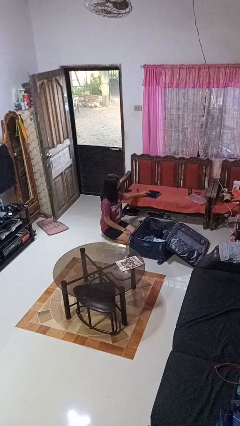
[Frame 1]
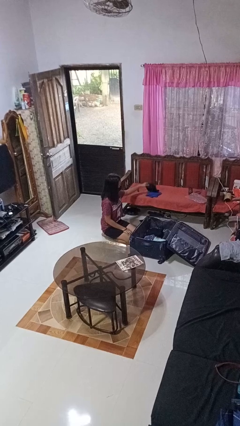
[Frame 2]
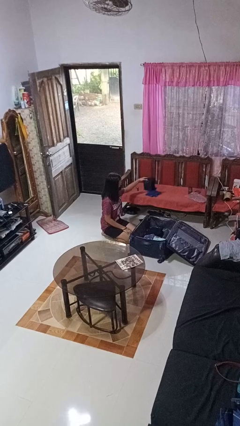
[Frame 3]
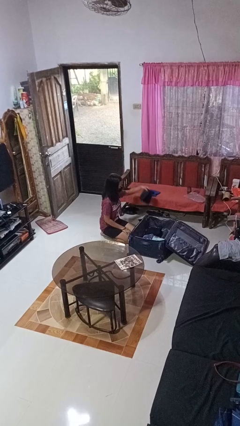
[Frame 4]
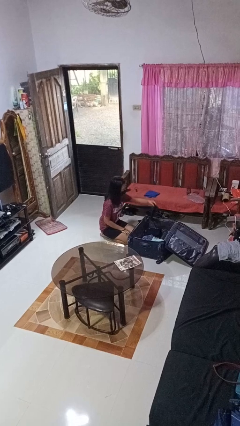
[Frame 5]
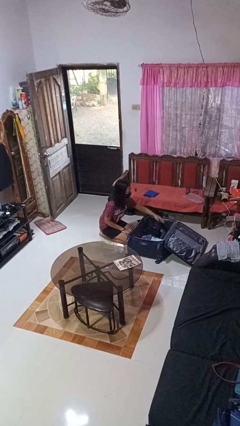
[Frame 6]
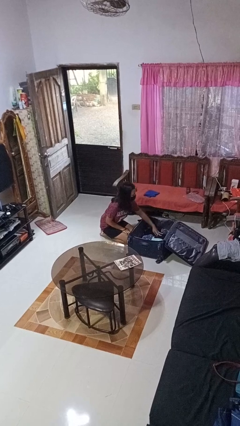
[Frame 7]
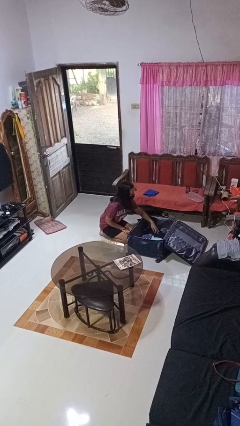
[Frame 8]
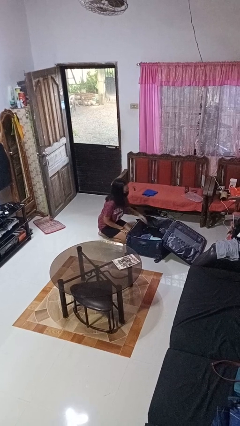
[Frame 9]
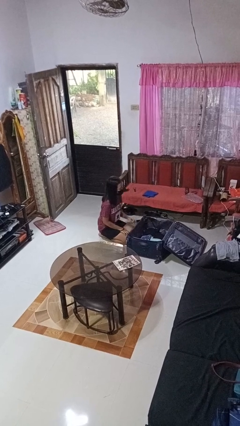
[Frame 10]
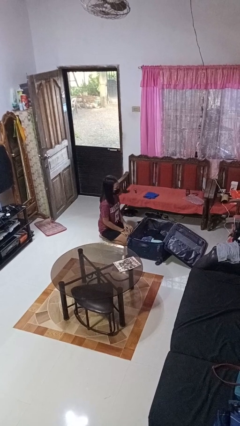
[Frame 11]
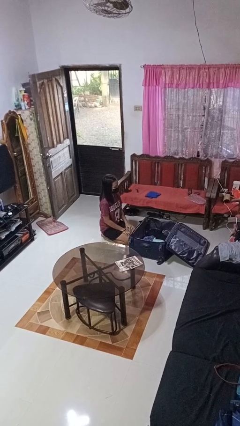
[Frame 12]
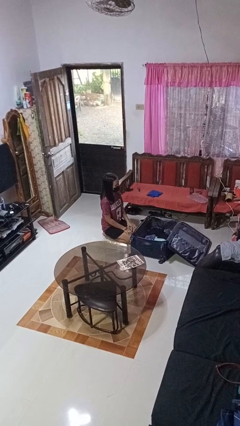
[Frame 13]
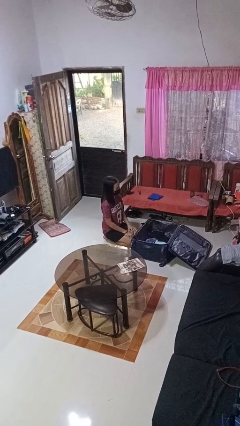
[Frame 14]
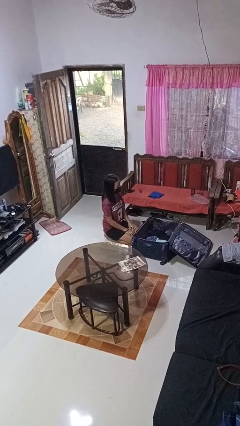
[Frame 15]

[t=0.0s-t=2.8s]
person loads clothes into suitcase

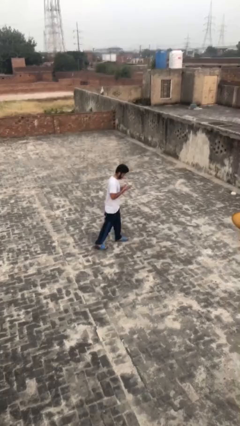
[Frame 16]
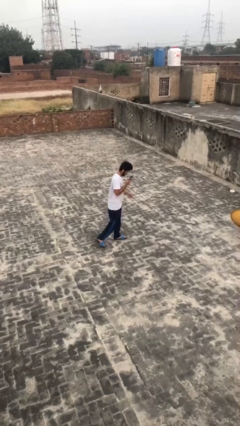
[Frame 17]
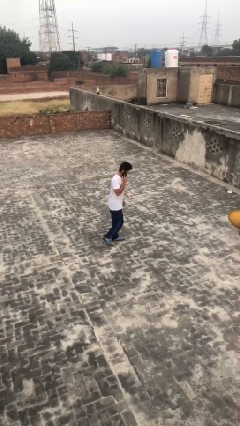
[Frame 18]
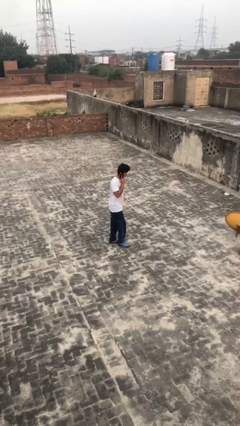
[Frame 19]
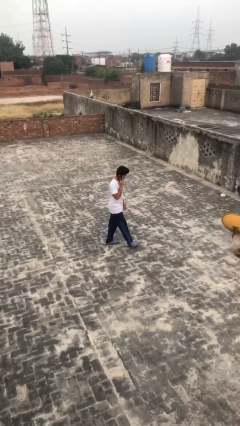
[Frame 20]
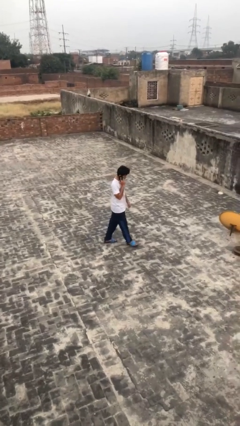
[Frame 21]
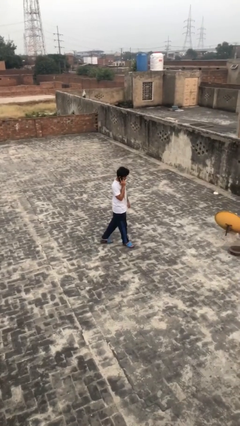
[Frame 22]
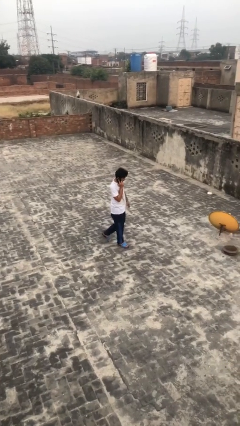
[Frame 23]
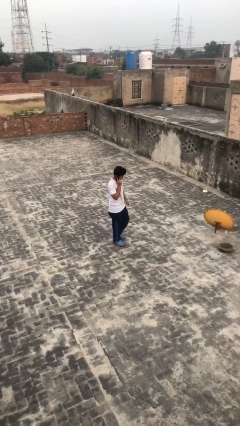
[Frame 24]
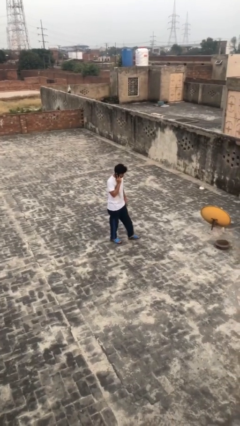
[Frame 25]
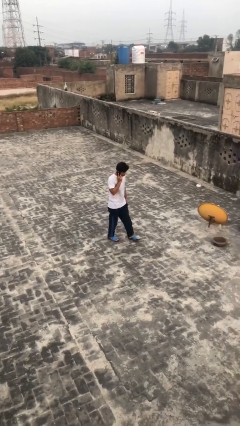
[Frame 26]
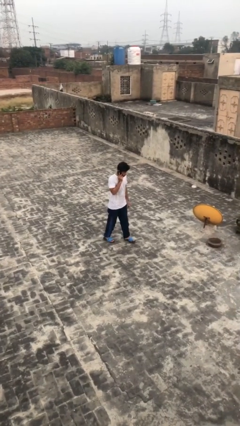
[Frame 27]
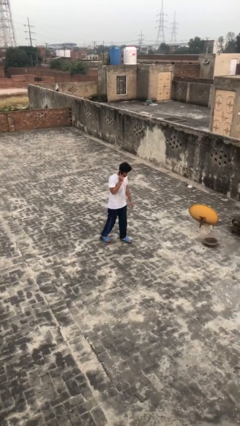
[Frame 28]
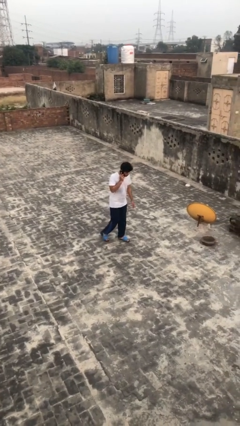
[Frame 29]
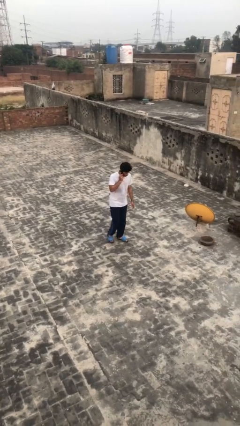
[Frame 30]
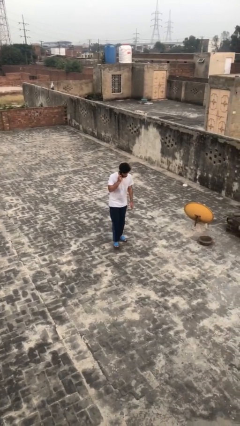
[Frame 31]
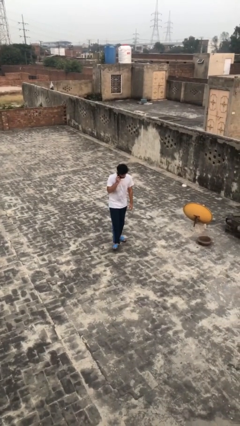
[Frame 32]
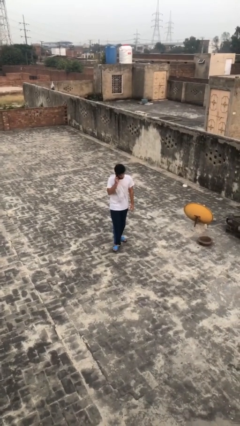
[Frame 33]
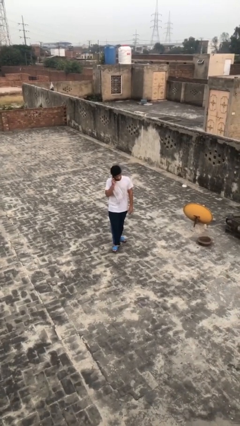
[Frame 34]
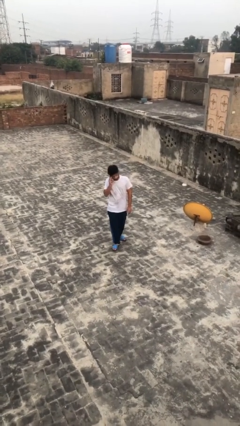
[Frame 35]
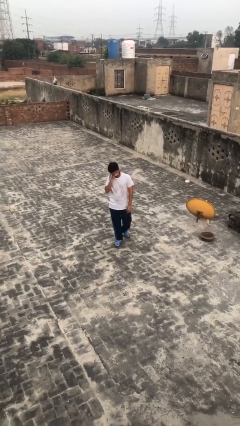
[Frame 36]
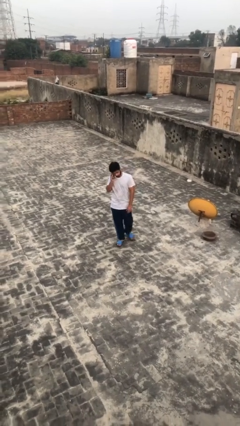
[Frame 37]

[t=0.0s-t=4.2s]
person talks on phone

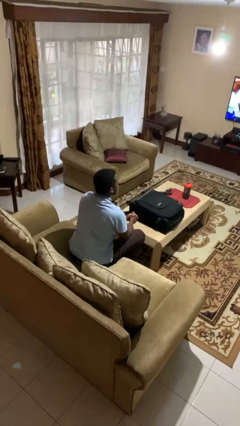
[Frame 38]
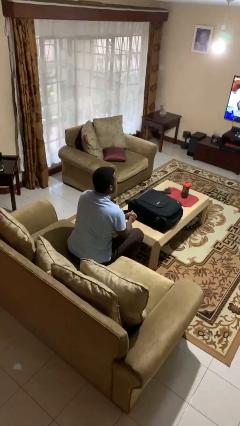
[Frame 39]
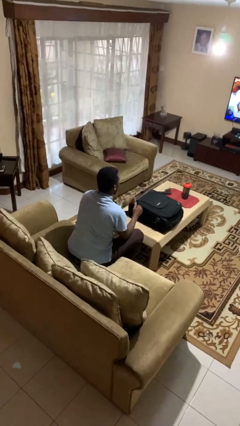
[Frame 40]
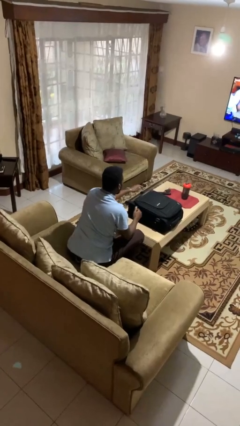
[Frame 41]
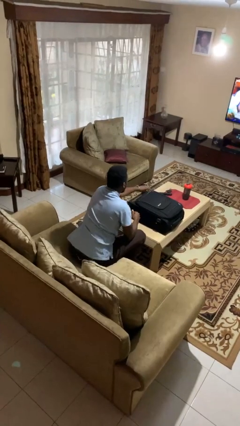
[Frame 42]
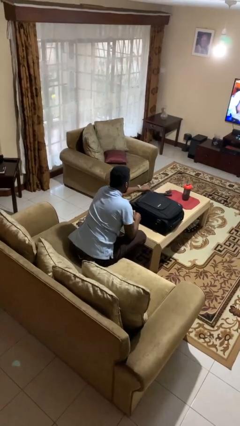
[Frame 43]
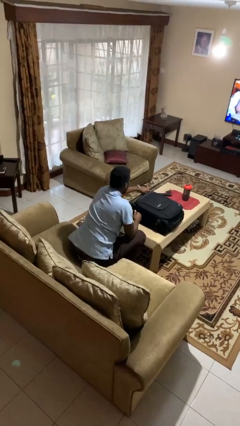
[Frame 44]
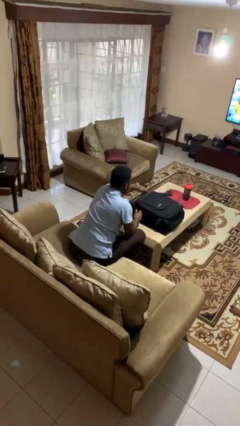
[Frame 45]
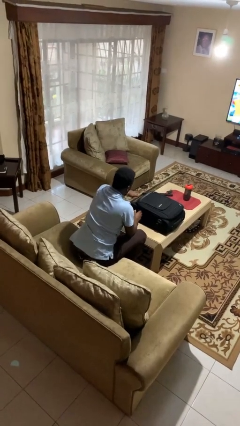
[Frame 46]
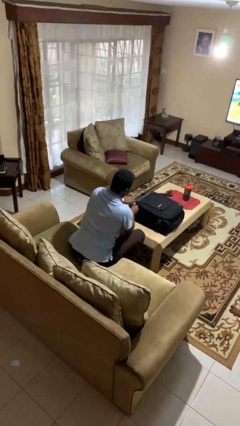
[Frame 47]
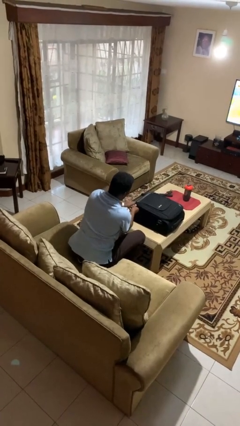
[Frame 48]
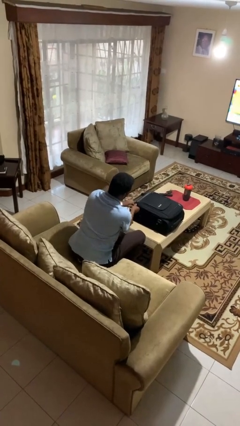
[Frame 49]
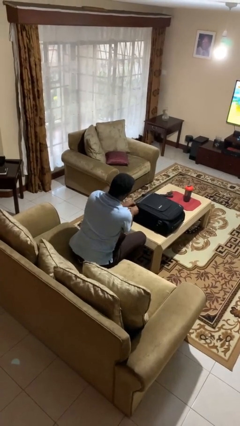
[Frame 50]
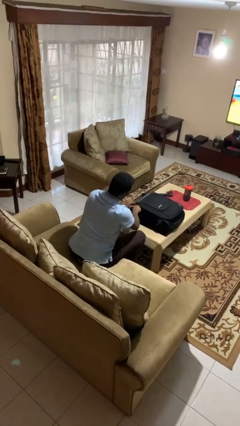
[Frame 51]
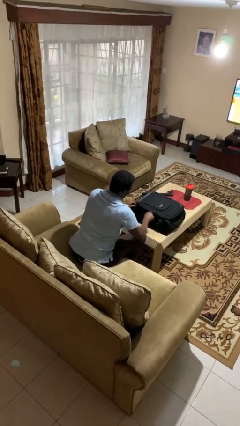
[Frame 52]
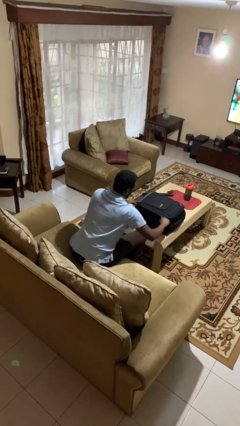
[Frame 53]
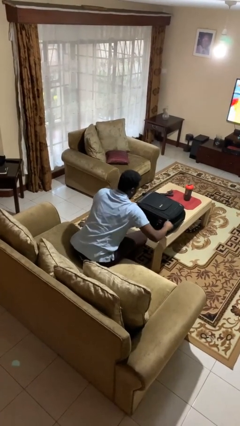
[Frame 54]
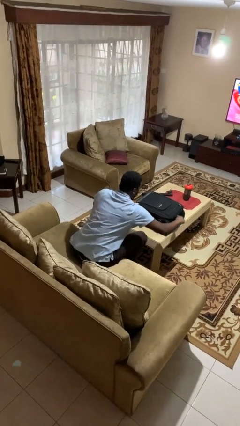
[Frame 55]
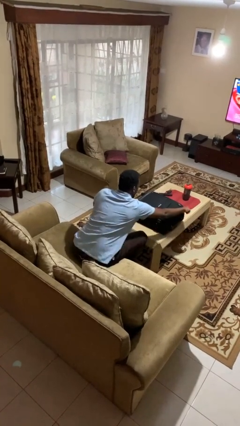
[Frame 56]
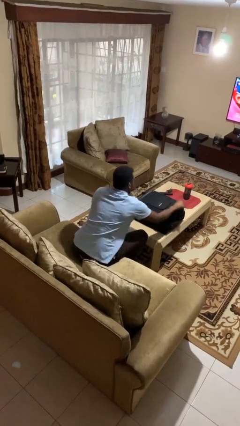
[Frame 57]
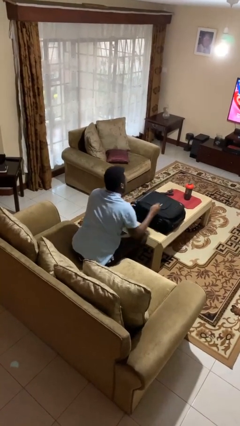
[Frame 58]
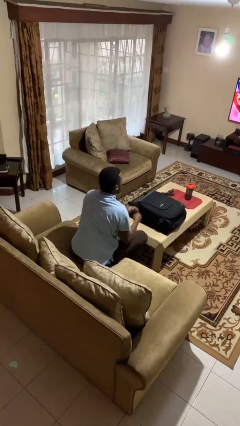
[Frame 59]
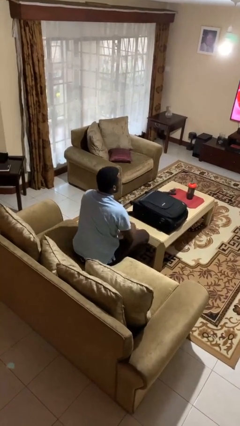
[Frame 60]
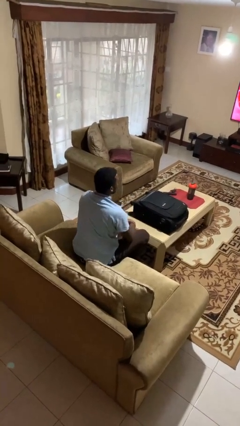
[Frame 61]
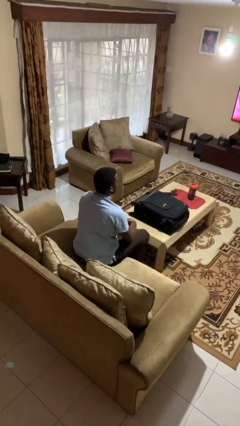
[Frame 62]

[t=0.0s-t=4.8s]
person closes suitcase

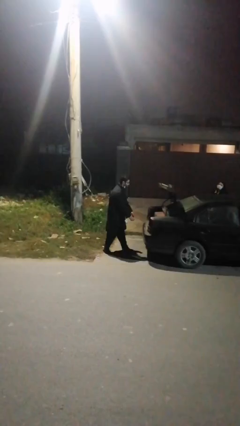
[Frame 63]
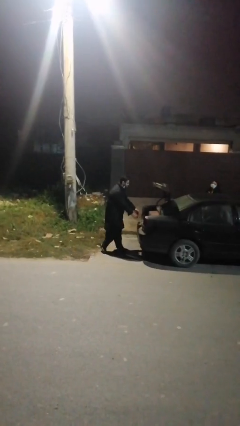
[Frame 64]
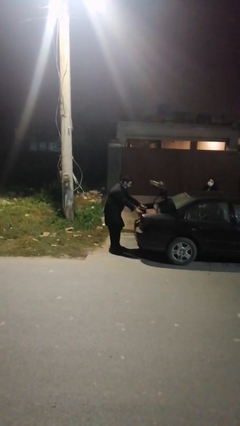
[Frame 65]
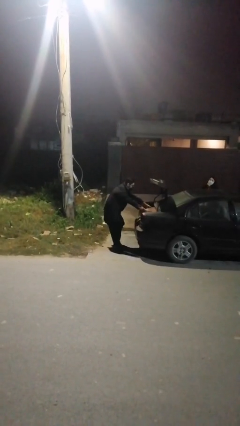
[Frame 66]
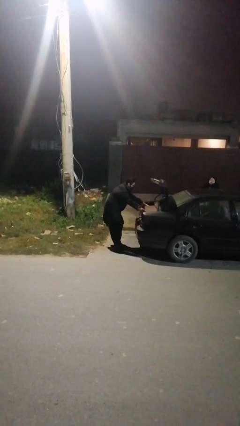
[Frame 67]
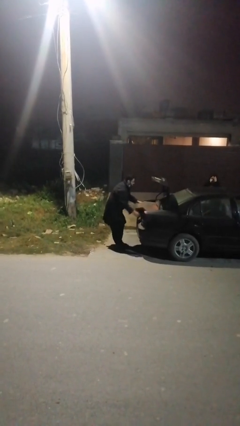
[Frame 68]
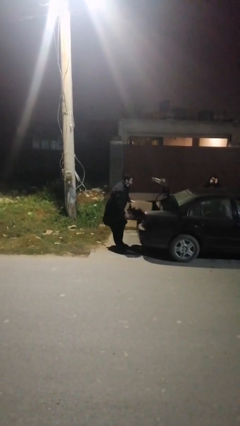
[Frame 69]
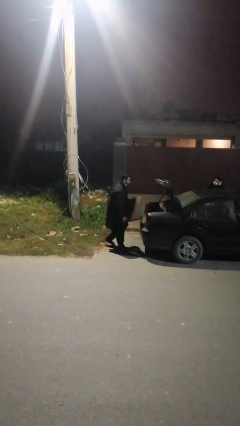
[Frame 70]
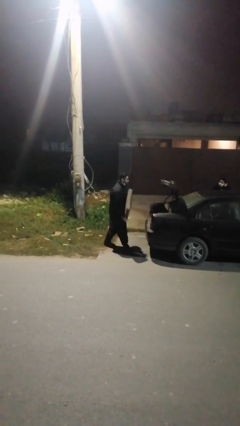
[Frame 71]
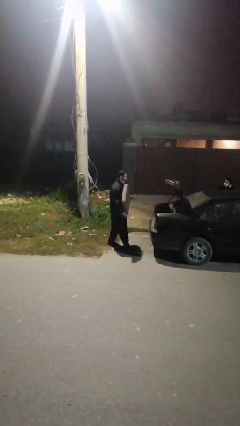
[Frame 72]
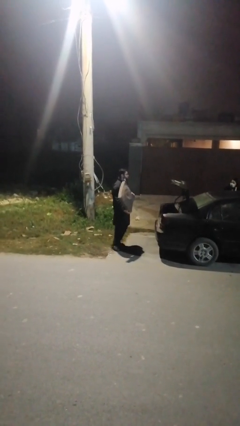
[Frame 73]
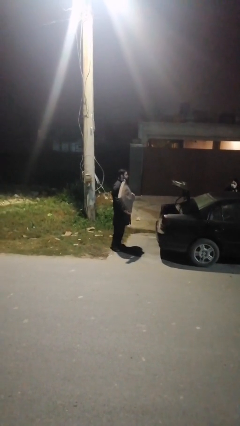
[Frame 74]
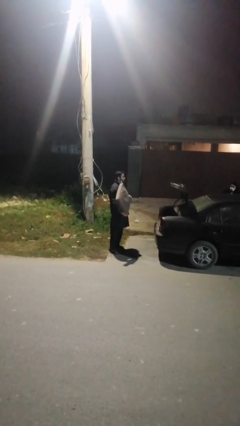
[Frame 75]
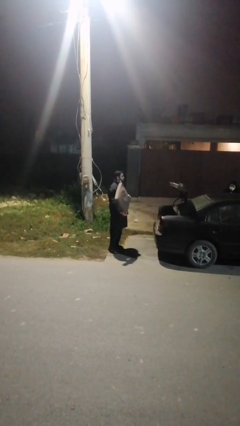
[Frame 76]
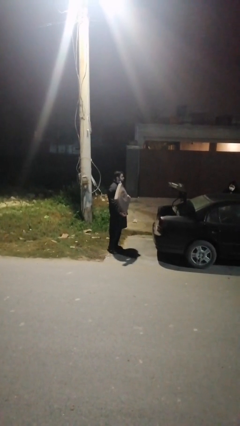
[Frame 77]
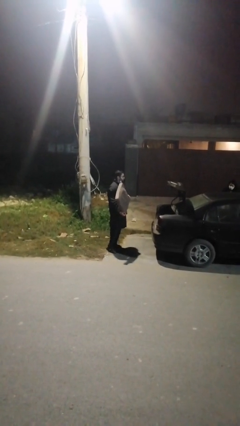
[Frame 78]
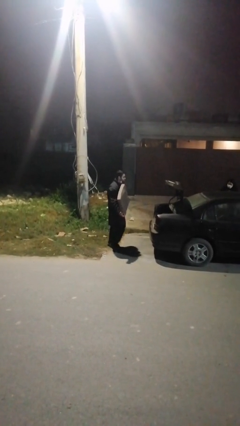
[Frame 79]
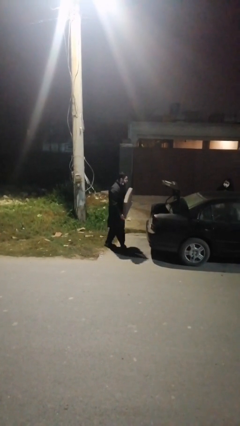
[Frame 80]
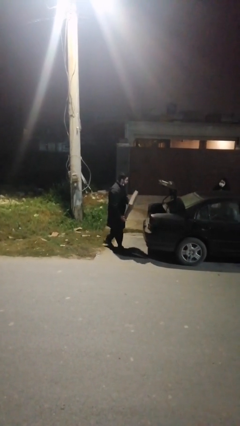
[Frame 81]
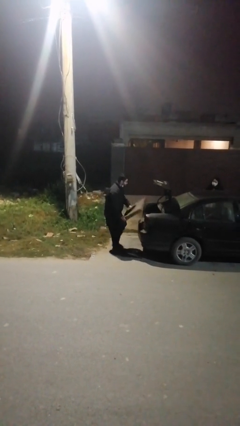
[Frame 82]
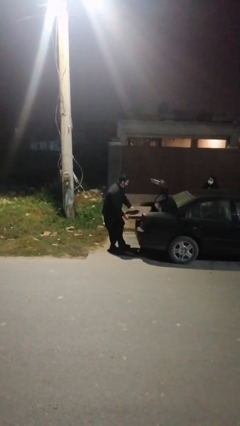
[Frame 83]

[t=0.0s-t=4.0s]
person unloads car

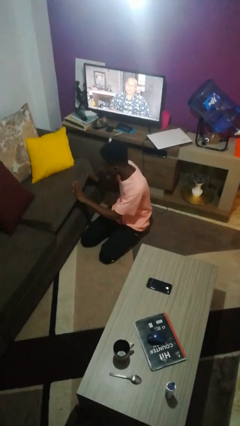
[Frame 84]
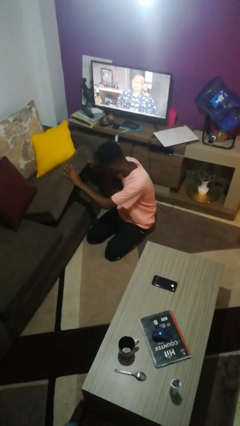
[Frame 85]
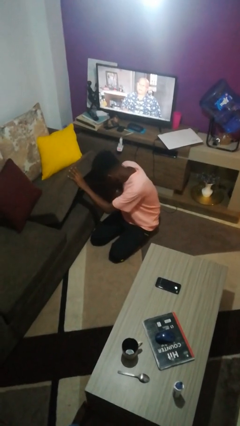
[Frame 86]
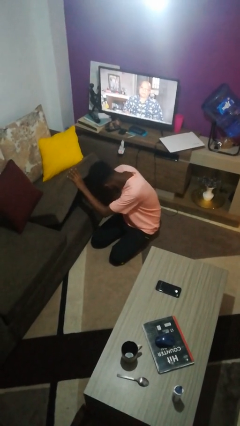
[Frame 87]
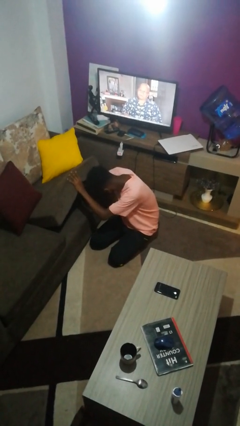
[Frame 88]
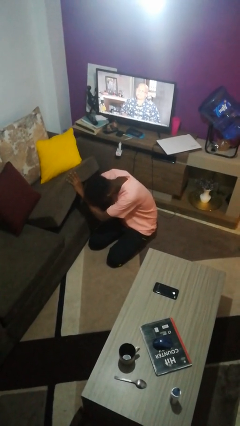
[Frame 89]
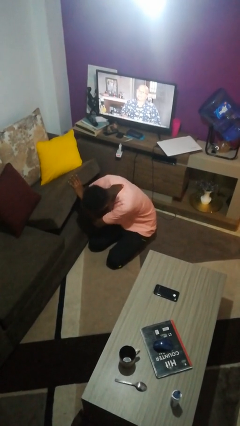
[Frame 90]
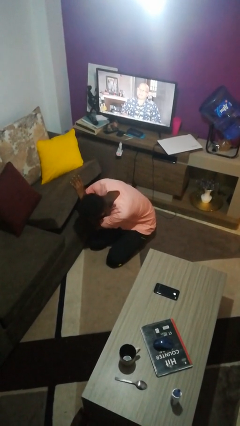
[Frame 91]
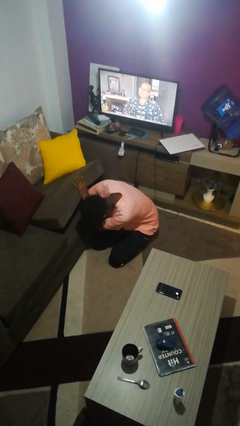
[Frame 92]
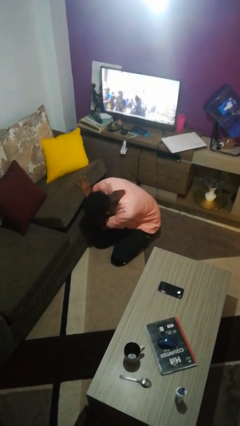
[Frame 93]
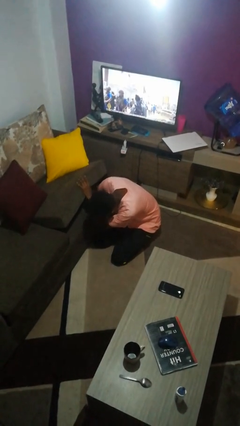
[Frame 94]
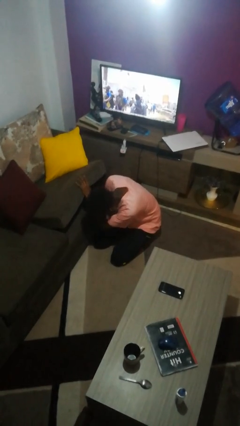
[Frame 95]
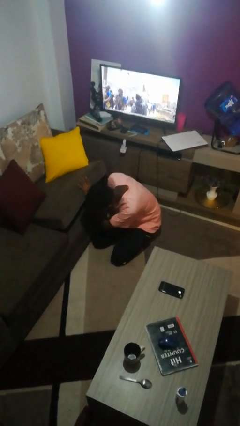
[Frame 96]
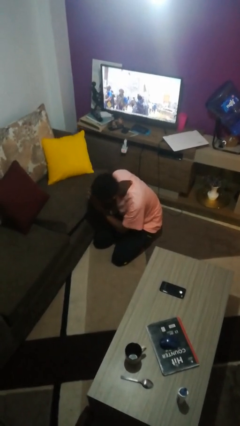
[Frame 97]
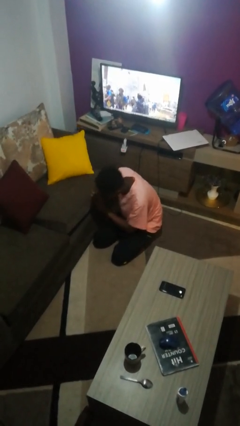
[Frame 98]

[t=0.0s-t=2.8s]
person searches under couch
